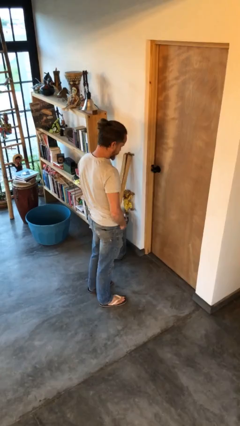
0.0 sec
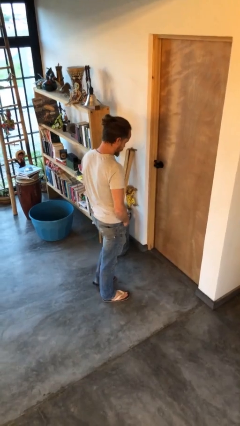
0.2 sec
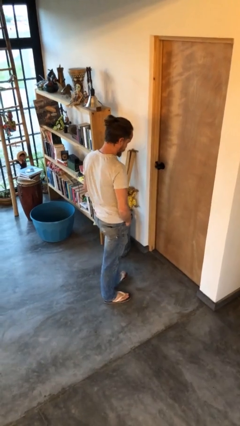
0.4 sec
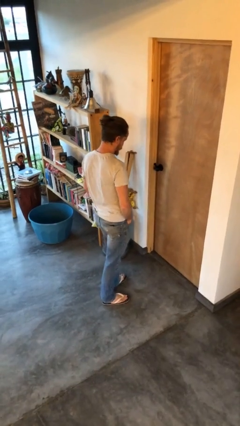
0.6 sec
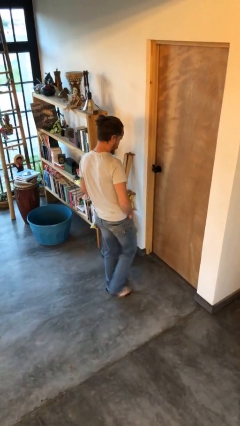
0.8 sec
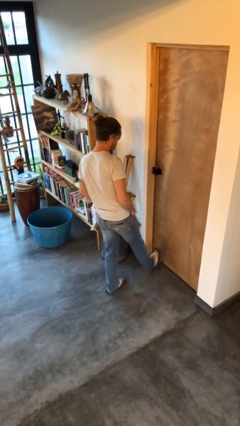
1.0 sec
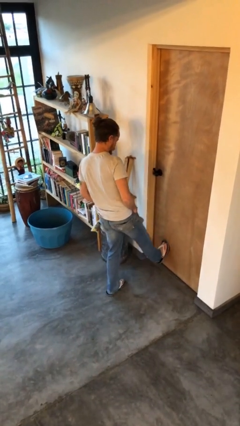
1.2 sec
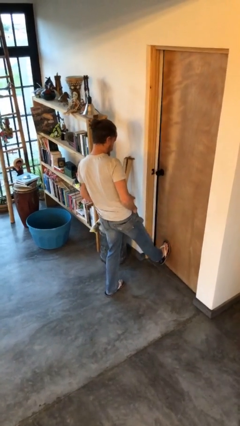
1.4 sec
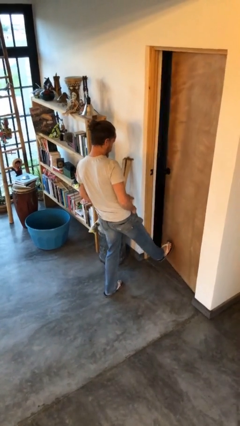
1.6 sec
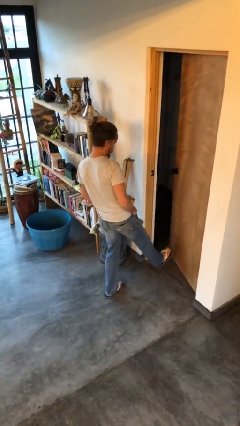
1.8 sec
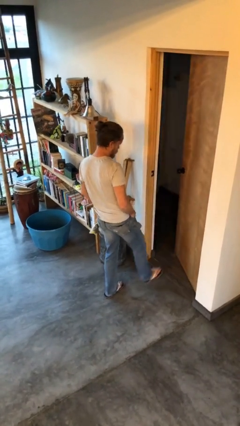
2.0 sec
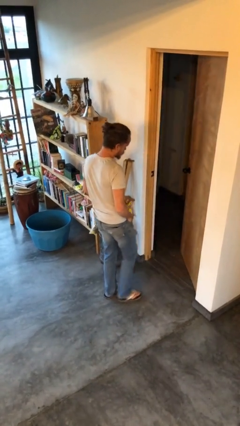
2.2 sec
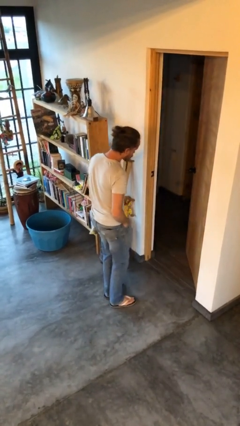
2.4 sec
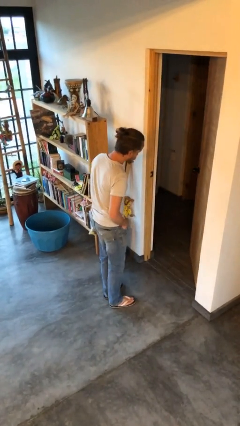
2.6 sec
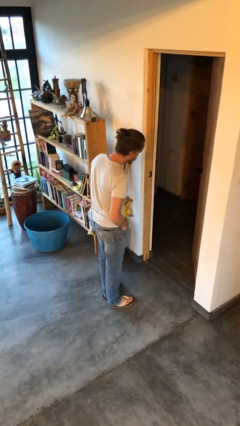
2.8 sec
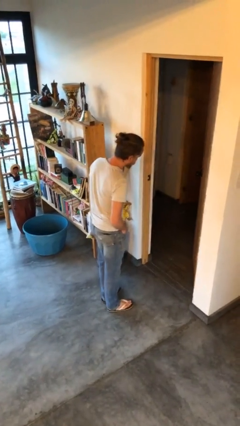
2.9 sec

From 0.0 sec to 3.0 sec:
person opens facility door

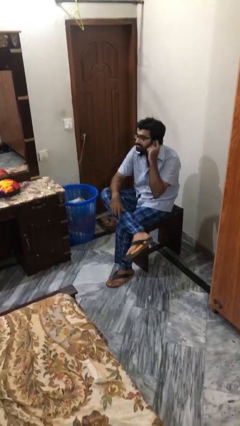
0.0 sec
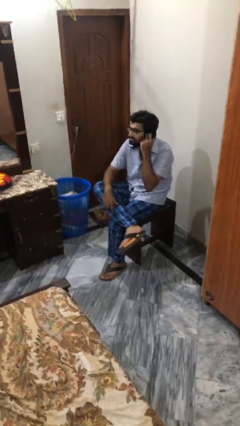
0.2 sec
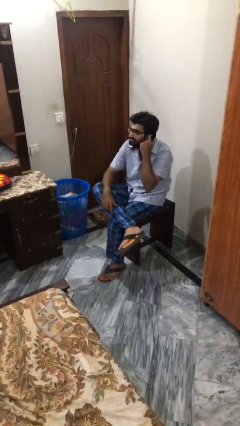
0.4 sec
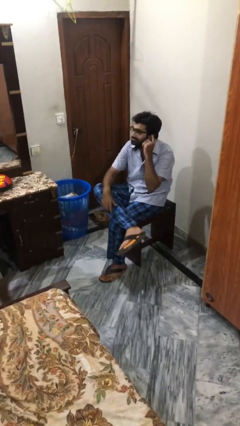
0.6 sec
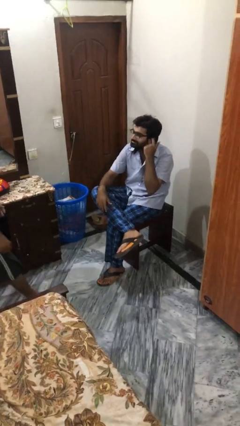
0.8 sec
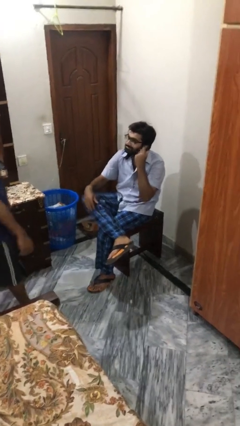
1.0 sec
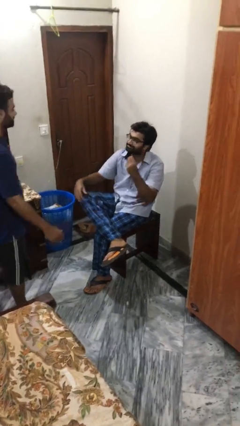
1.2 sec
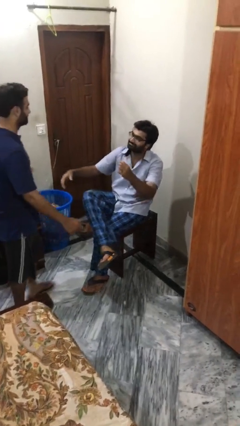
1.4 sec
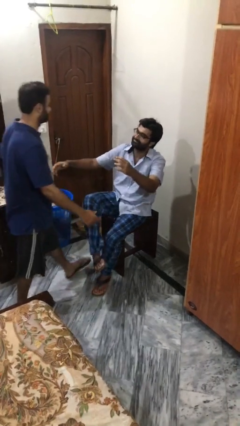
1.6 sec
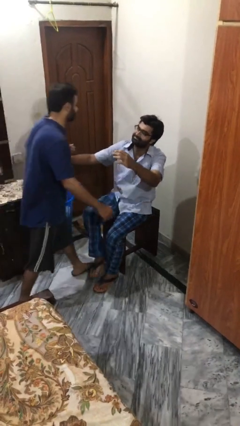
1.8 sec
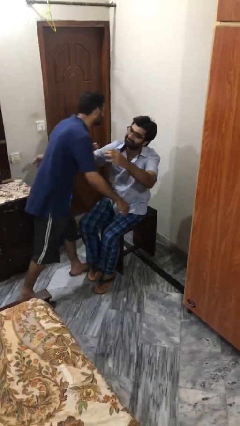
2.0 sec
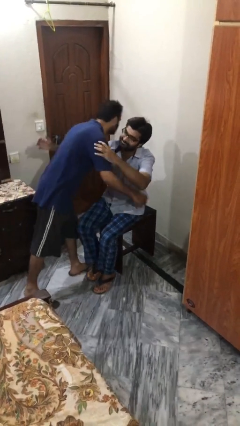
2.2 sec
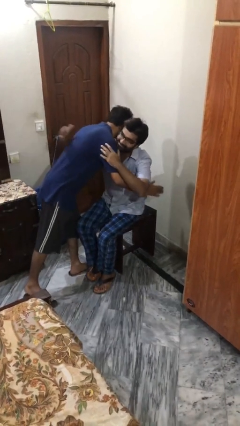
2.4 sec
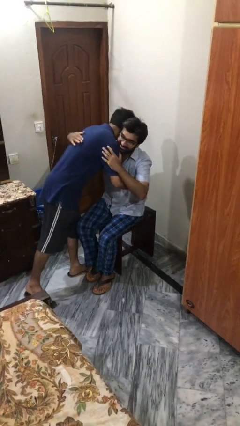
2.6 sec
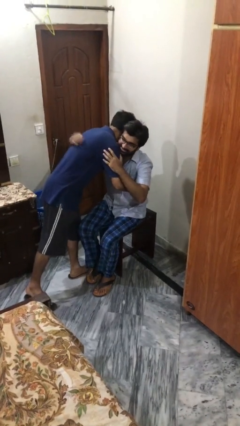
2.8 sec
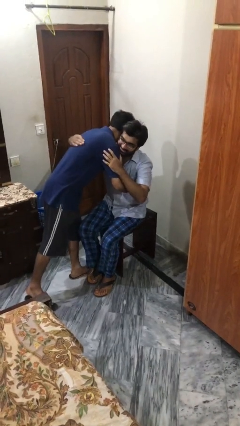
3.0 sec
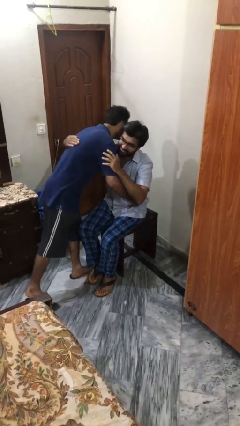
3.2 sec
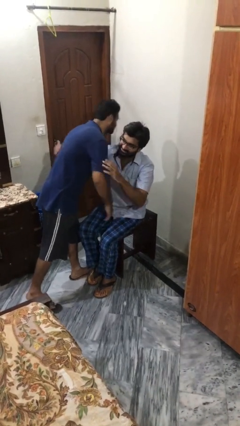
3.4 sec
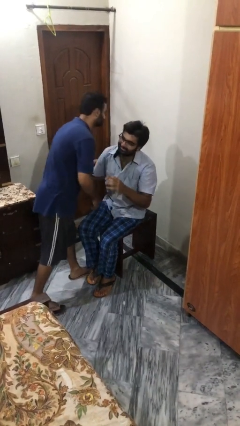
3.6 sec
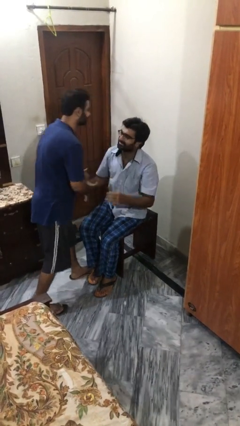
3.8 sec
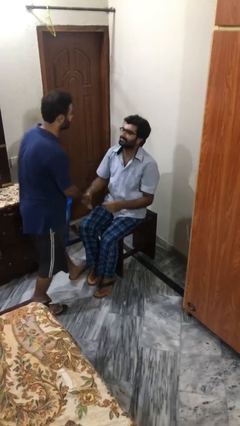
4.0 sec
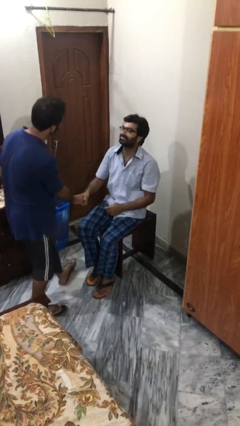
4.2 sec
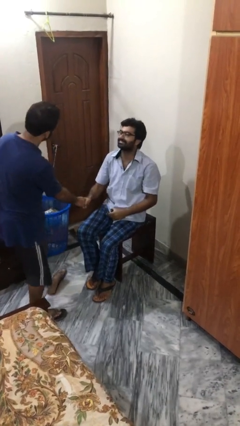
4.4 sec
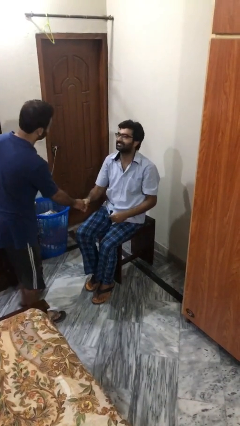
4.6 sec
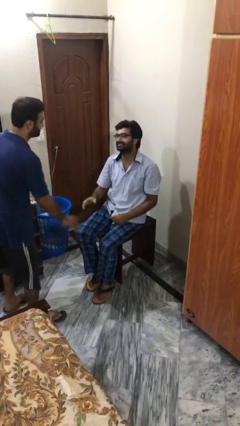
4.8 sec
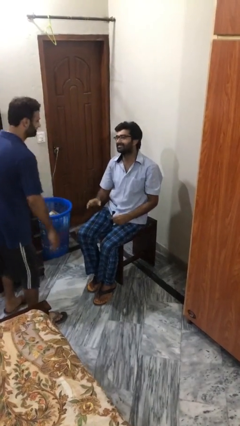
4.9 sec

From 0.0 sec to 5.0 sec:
person embraces person

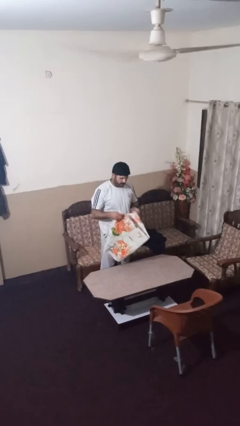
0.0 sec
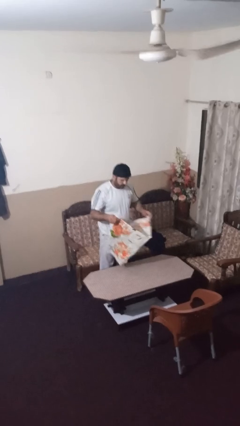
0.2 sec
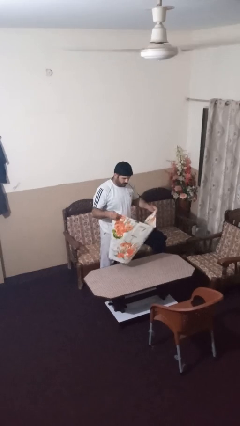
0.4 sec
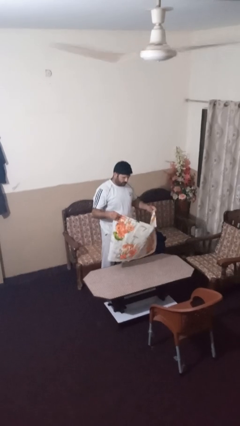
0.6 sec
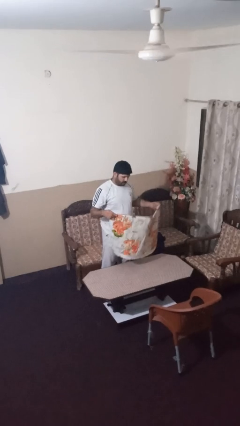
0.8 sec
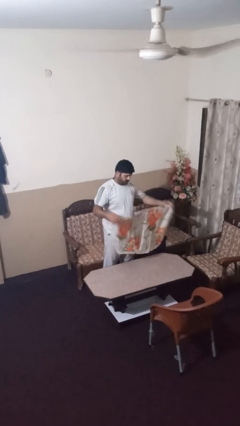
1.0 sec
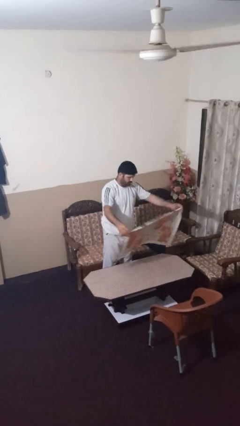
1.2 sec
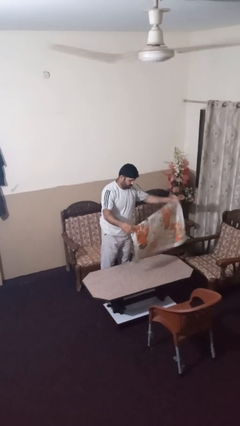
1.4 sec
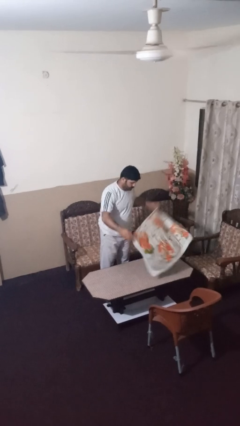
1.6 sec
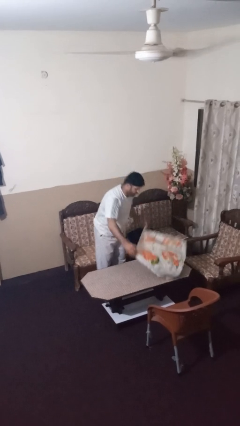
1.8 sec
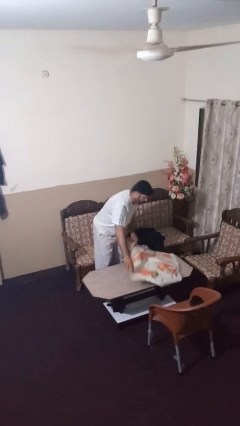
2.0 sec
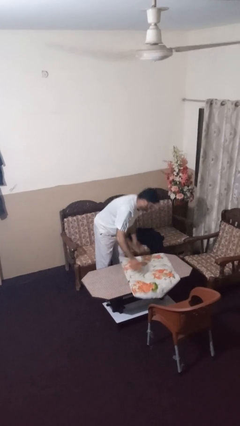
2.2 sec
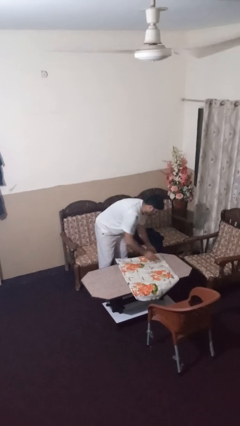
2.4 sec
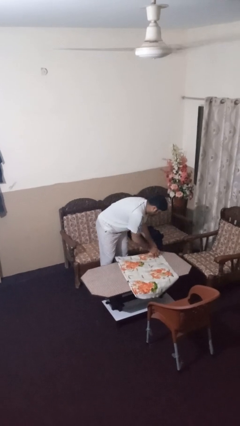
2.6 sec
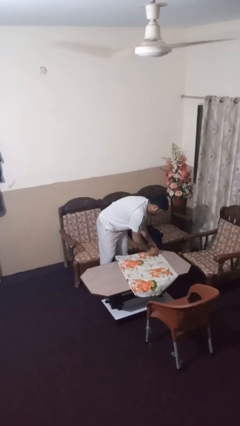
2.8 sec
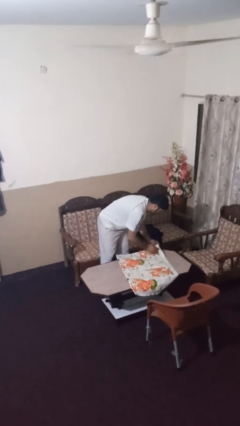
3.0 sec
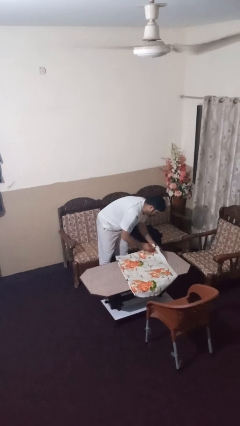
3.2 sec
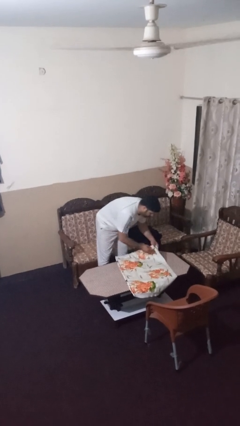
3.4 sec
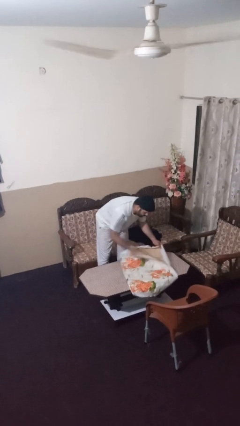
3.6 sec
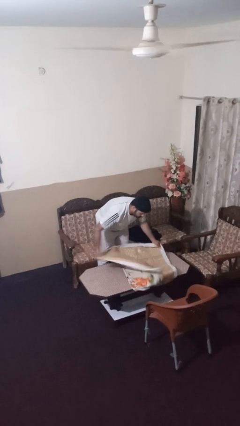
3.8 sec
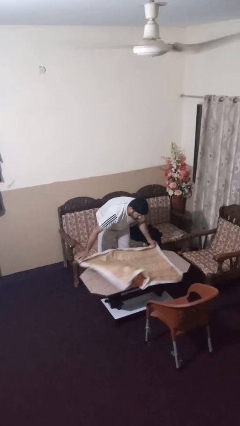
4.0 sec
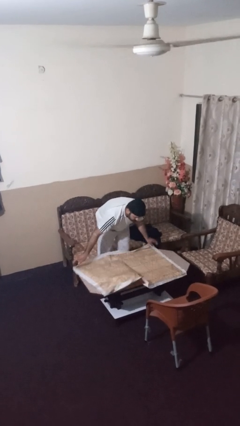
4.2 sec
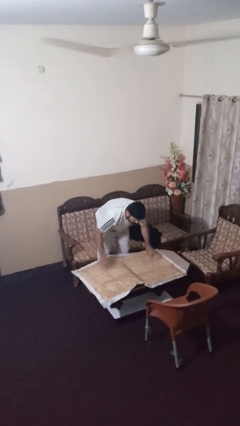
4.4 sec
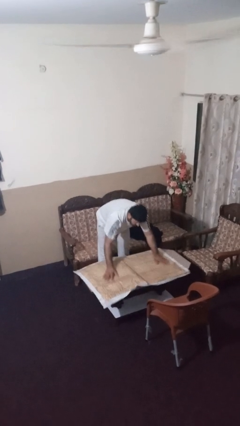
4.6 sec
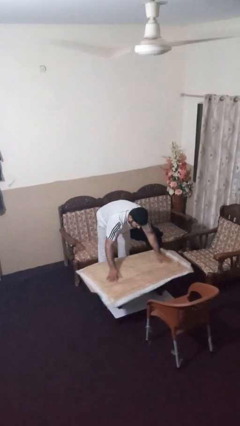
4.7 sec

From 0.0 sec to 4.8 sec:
person spreads tablecloth

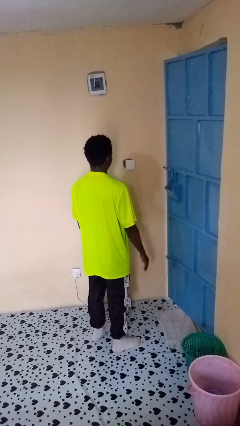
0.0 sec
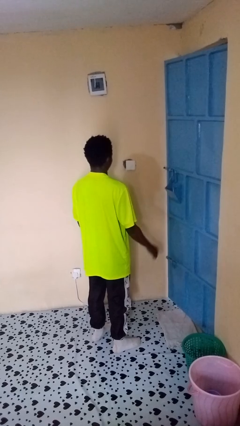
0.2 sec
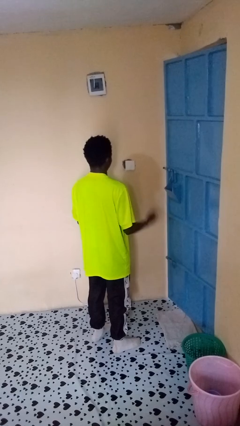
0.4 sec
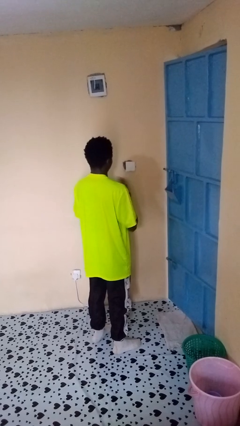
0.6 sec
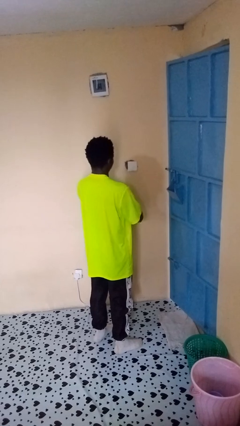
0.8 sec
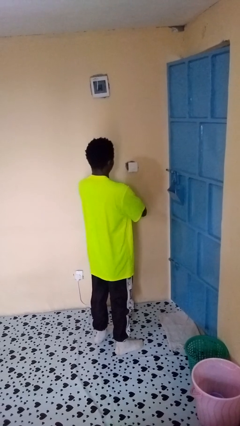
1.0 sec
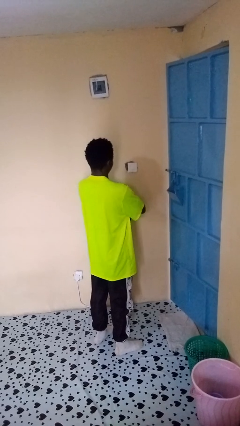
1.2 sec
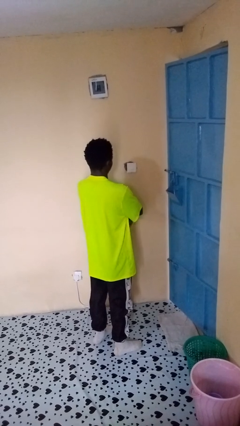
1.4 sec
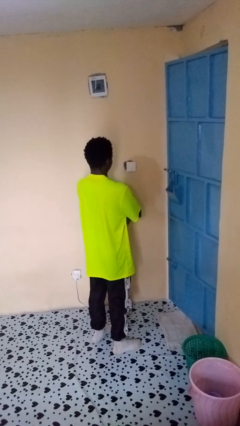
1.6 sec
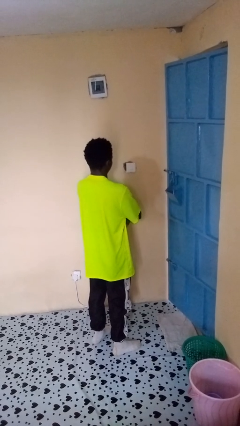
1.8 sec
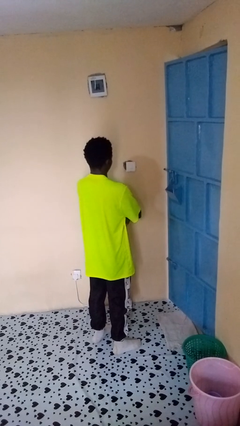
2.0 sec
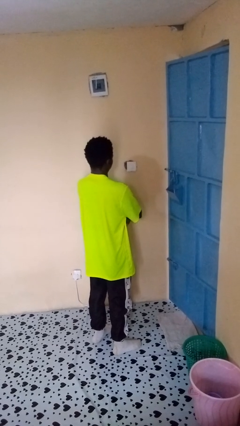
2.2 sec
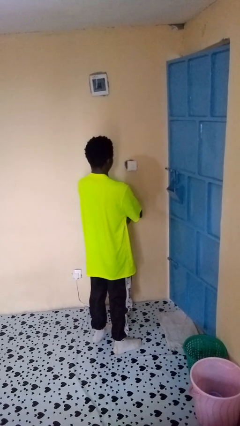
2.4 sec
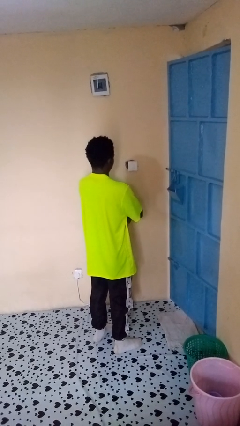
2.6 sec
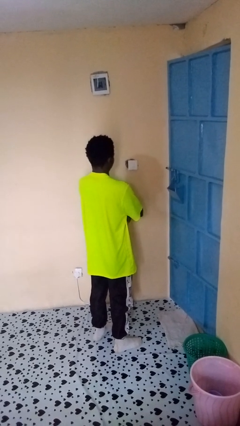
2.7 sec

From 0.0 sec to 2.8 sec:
person crosses arms

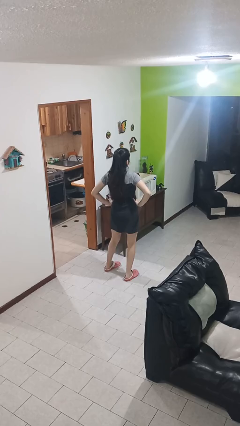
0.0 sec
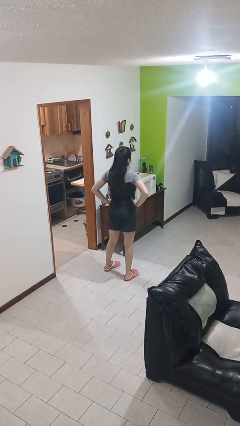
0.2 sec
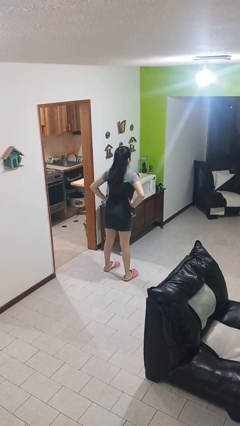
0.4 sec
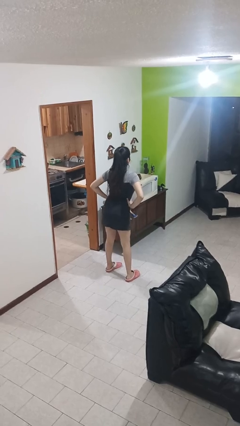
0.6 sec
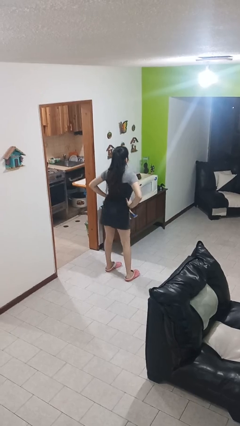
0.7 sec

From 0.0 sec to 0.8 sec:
person wiggles hips

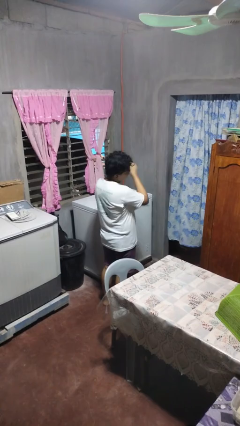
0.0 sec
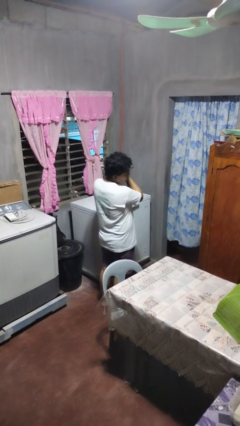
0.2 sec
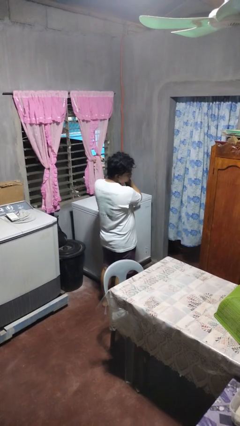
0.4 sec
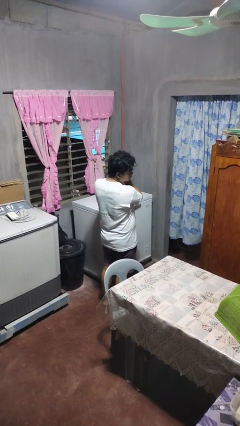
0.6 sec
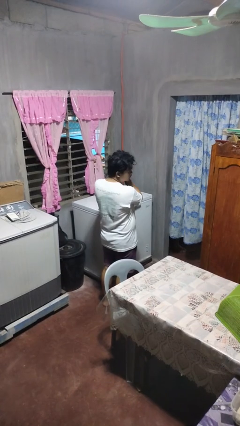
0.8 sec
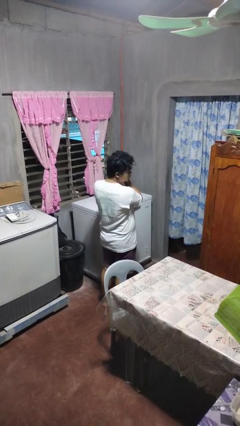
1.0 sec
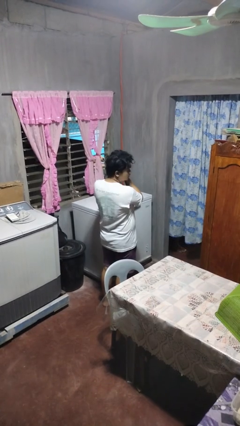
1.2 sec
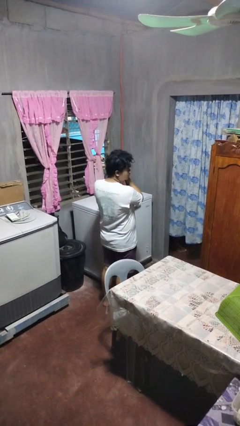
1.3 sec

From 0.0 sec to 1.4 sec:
person puts on earrings
